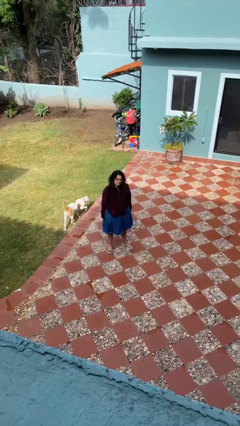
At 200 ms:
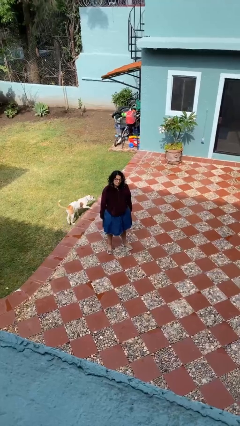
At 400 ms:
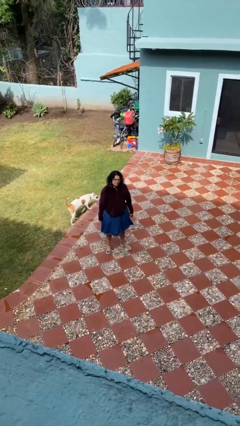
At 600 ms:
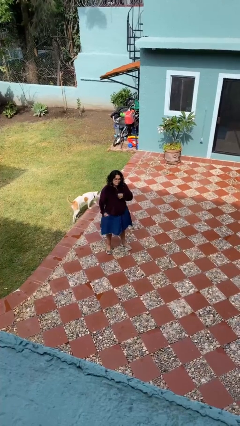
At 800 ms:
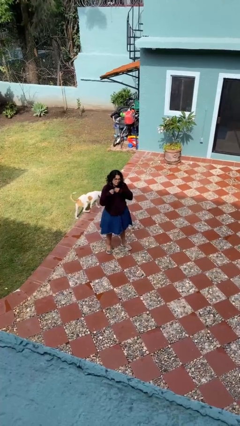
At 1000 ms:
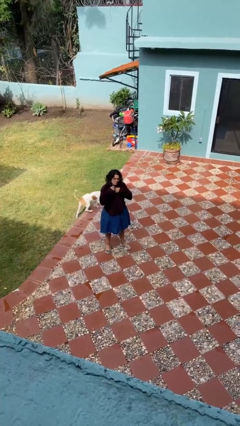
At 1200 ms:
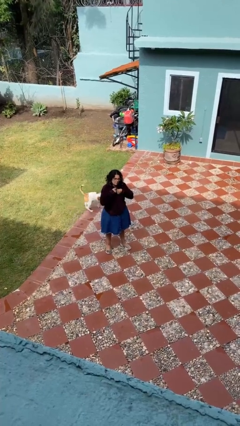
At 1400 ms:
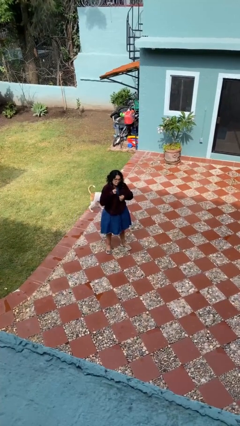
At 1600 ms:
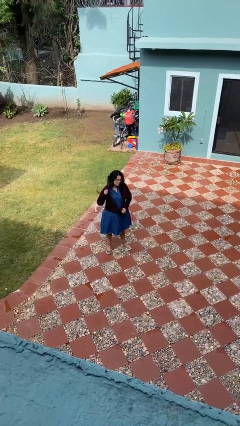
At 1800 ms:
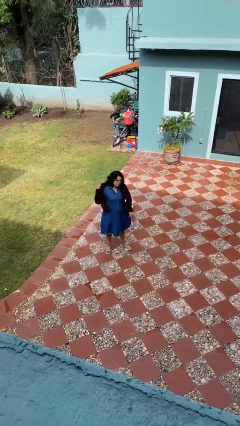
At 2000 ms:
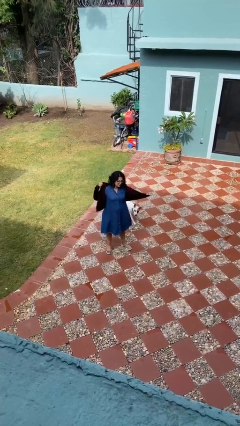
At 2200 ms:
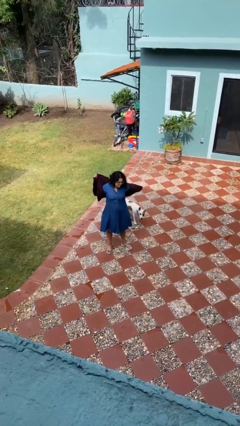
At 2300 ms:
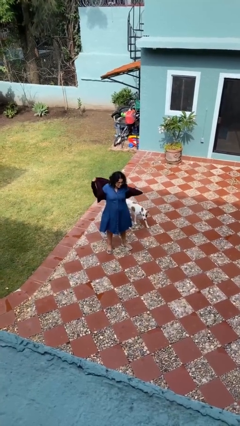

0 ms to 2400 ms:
person unzips jacket

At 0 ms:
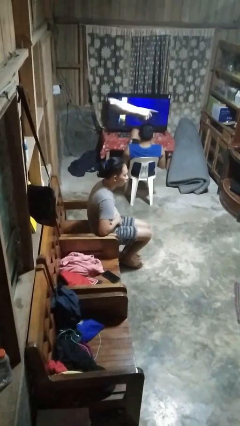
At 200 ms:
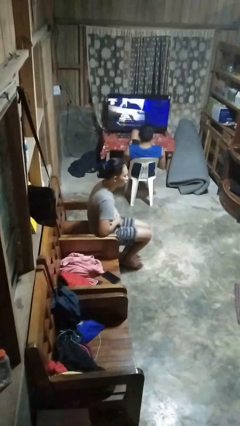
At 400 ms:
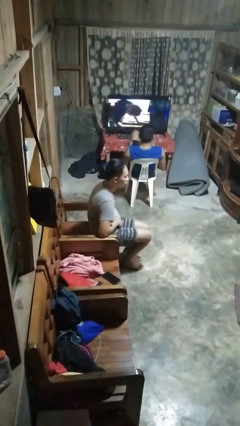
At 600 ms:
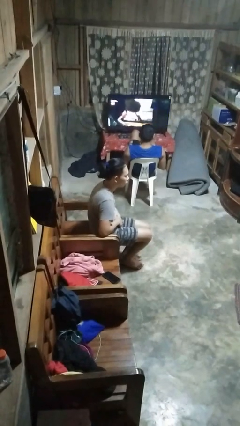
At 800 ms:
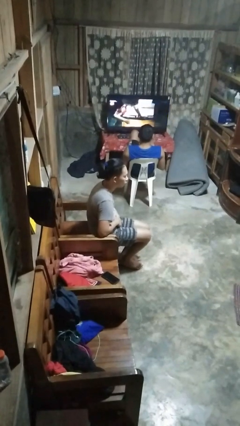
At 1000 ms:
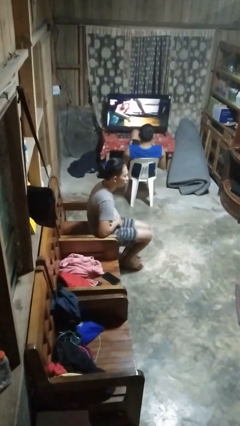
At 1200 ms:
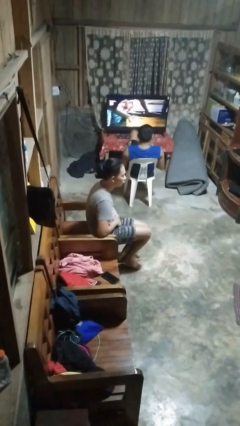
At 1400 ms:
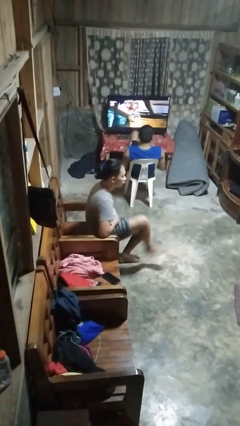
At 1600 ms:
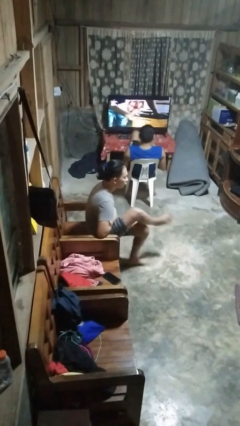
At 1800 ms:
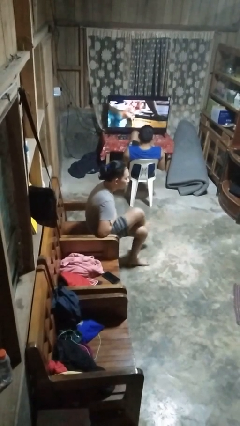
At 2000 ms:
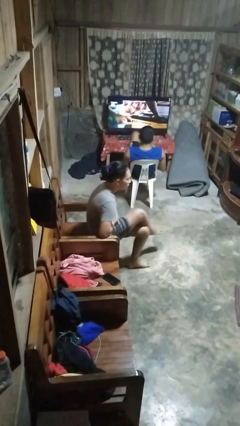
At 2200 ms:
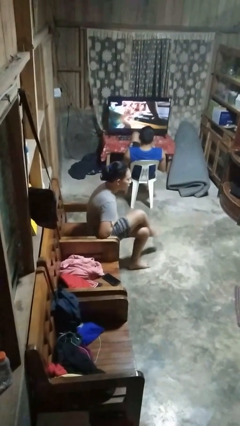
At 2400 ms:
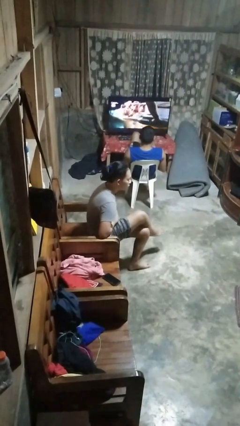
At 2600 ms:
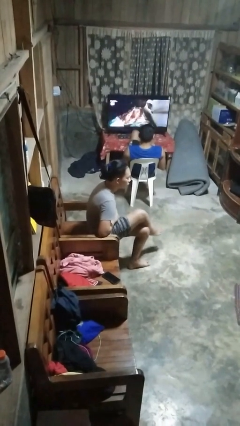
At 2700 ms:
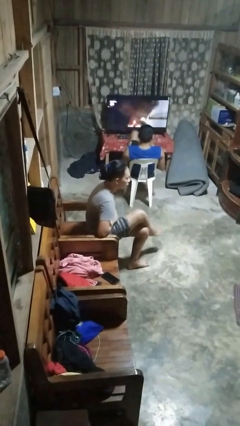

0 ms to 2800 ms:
person crosses legs

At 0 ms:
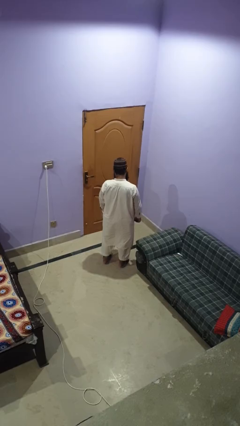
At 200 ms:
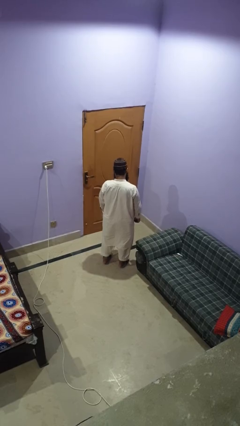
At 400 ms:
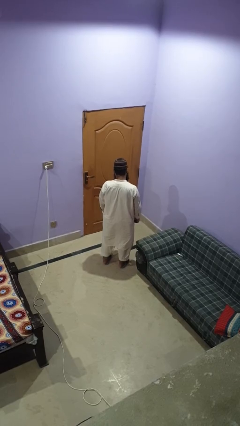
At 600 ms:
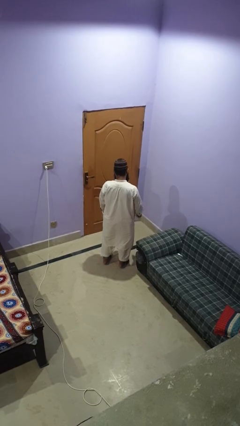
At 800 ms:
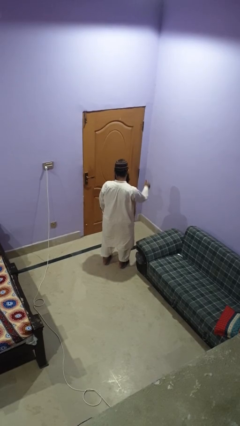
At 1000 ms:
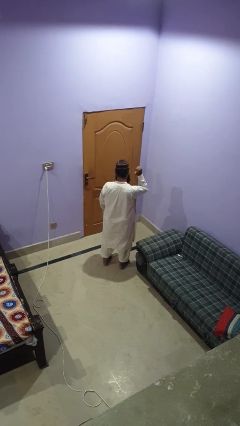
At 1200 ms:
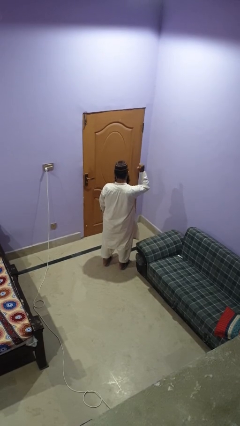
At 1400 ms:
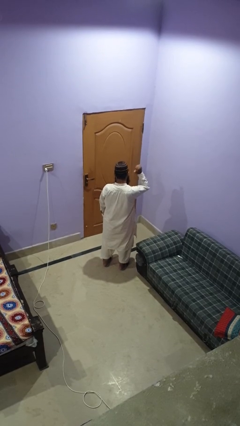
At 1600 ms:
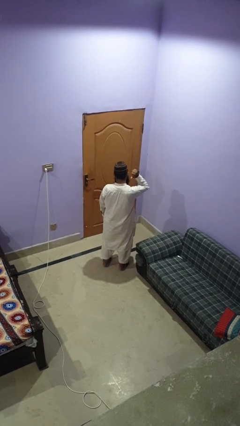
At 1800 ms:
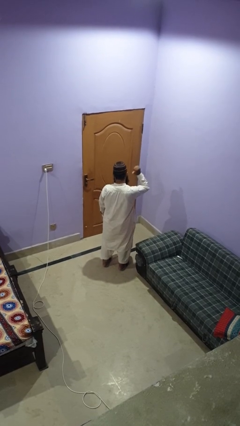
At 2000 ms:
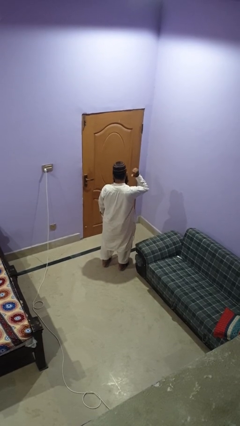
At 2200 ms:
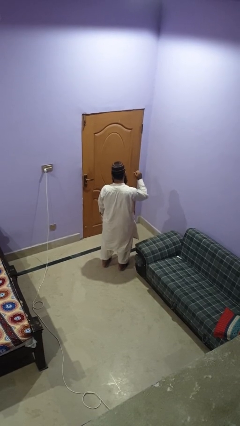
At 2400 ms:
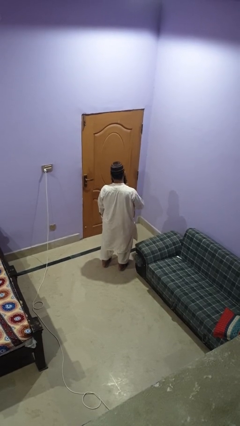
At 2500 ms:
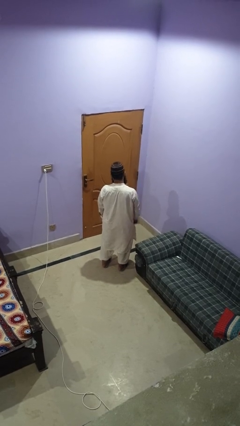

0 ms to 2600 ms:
person gestures behind me

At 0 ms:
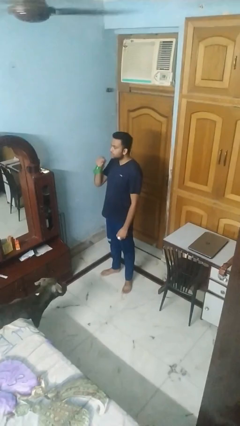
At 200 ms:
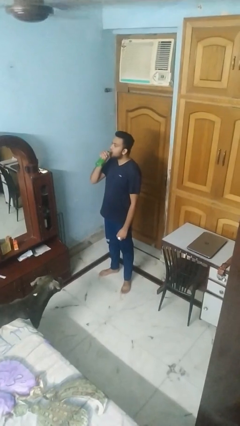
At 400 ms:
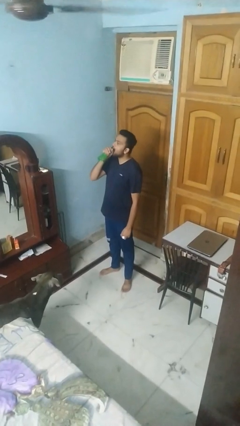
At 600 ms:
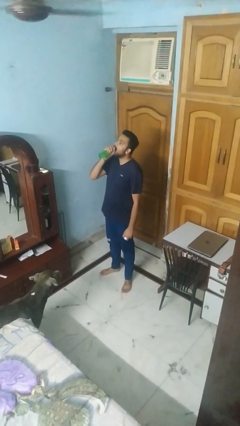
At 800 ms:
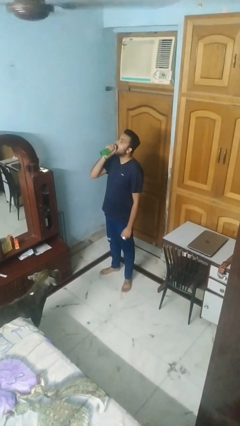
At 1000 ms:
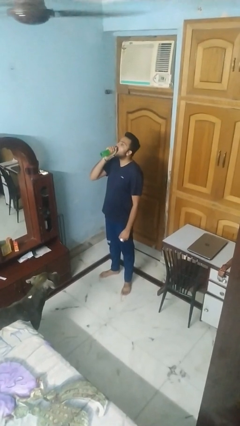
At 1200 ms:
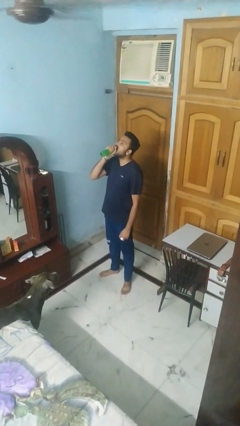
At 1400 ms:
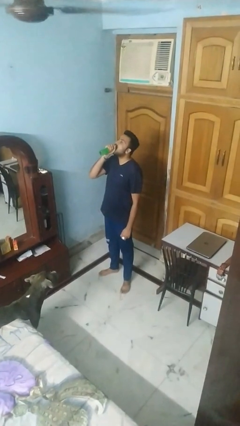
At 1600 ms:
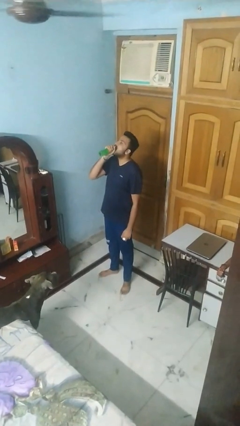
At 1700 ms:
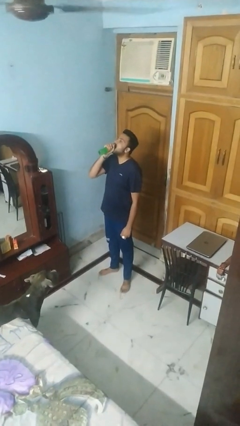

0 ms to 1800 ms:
person drinks from bottle

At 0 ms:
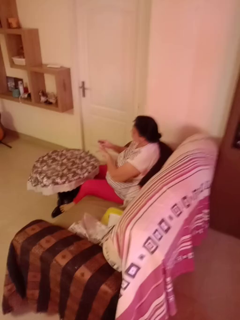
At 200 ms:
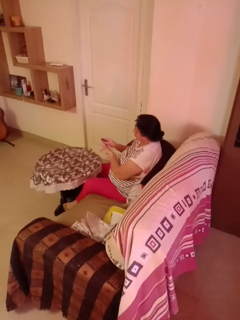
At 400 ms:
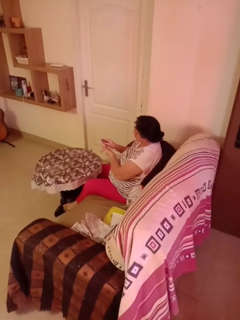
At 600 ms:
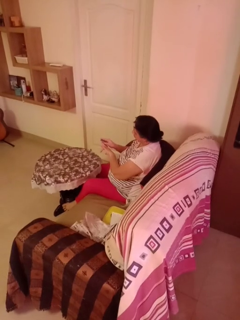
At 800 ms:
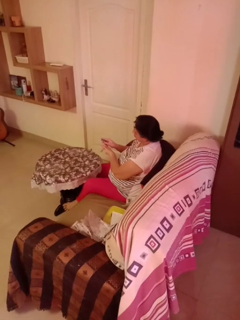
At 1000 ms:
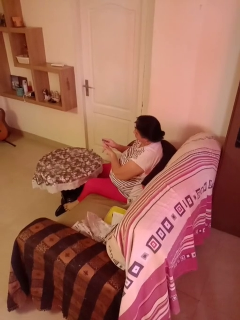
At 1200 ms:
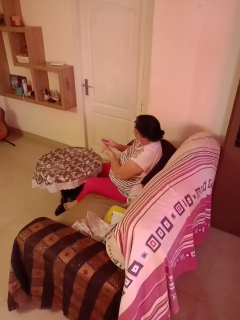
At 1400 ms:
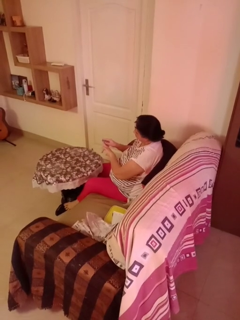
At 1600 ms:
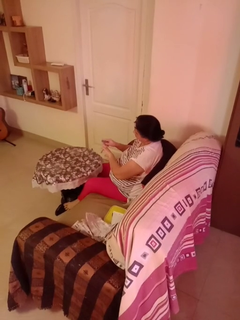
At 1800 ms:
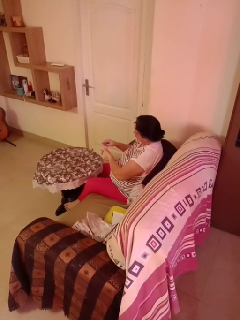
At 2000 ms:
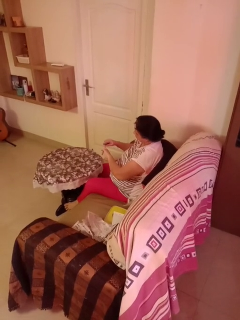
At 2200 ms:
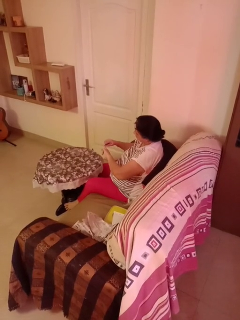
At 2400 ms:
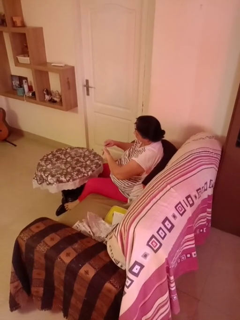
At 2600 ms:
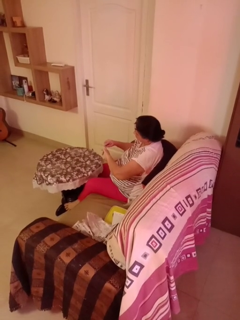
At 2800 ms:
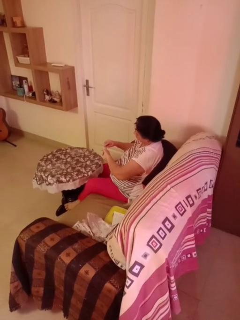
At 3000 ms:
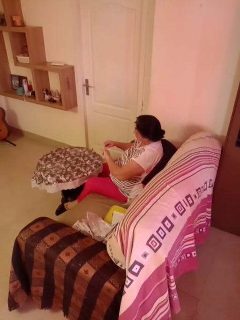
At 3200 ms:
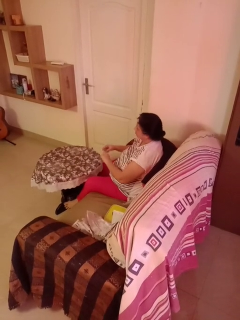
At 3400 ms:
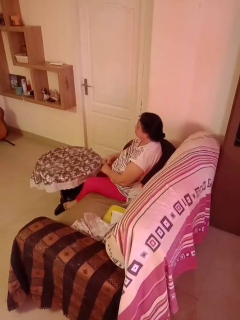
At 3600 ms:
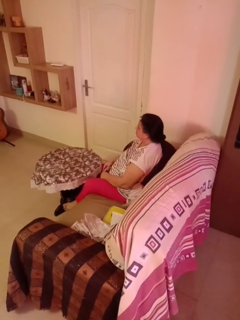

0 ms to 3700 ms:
person files fingernails

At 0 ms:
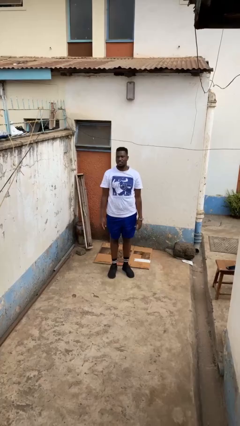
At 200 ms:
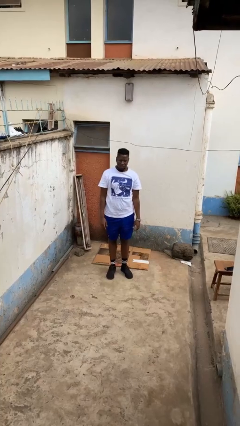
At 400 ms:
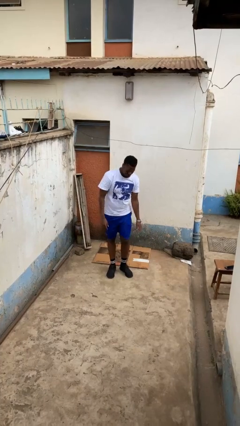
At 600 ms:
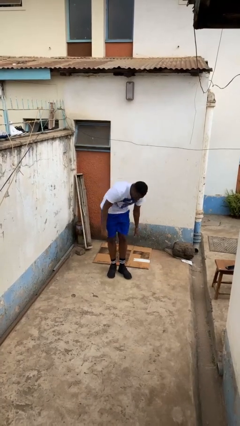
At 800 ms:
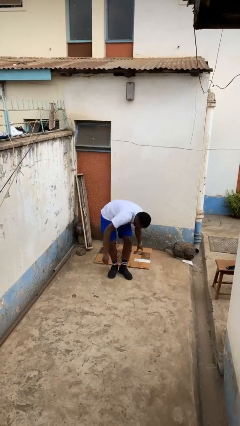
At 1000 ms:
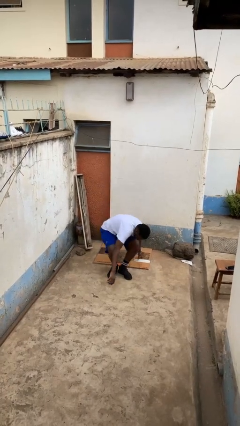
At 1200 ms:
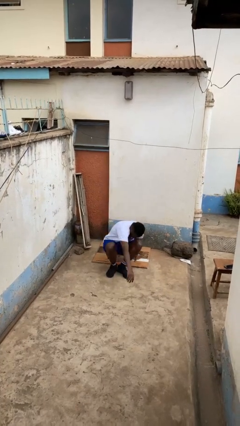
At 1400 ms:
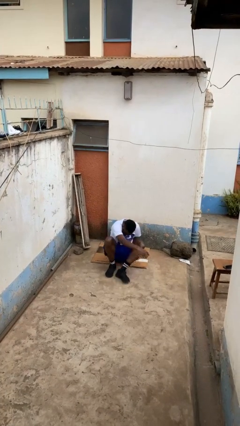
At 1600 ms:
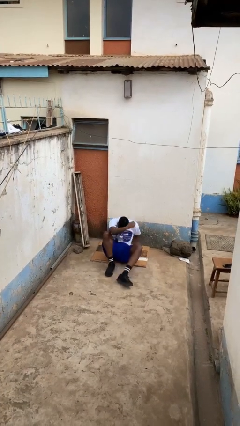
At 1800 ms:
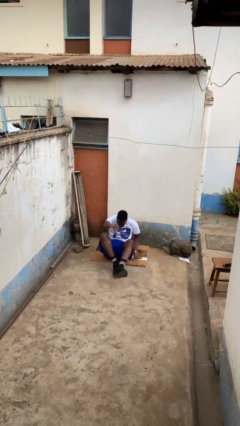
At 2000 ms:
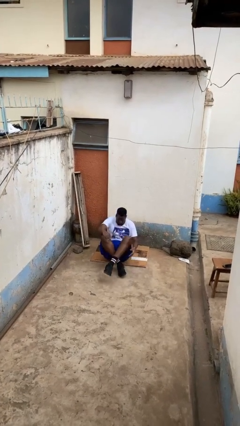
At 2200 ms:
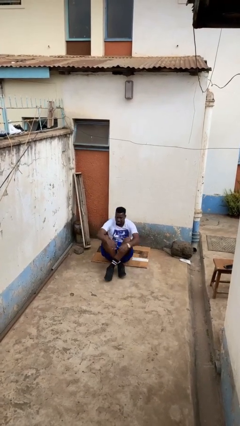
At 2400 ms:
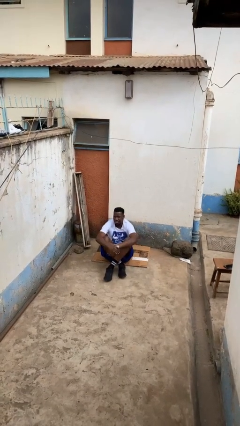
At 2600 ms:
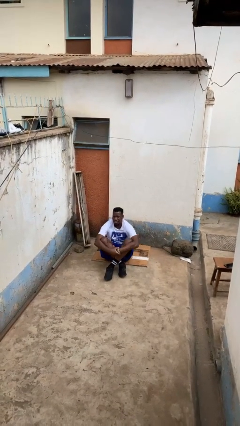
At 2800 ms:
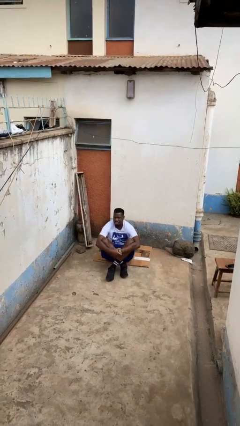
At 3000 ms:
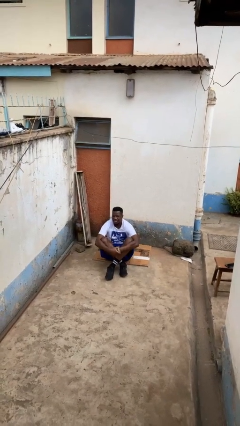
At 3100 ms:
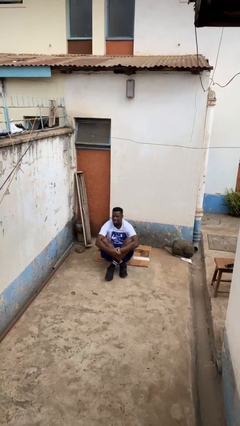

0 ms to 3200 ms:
person sits crisscross

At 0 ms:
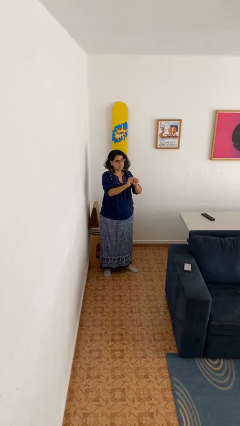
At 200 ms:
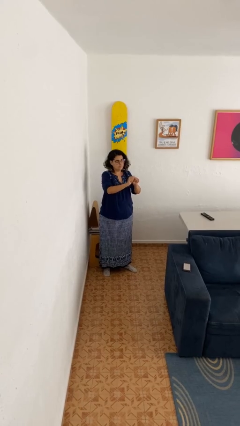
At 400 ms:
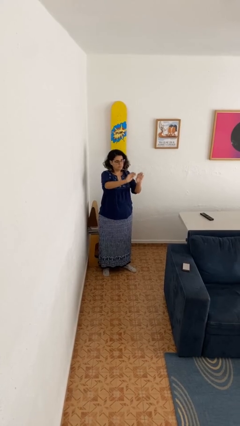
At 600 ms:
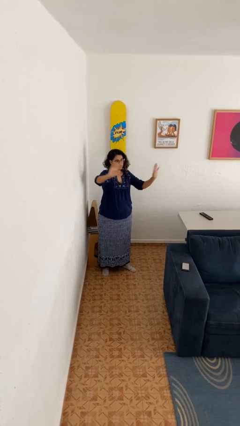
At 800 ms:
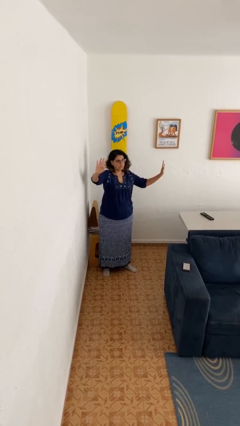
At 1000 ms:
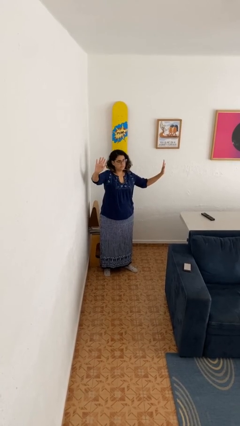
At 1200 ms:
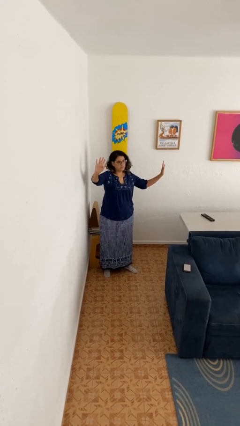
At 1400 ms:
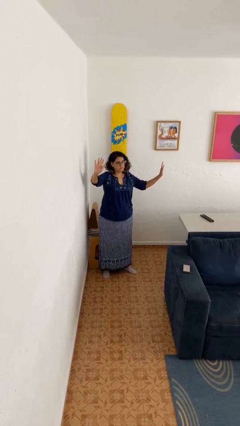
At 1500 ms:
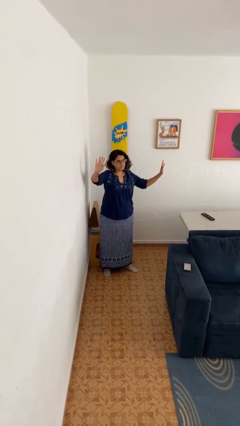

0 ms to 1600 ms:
person gestures zoom in
